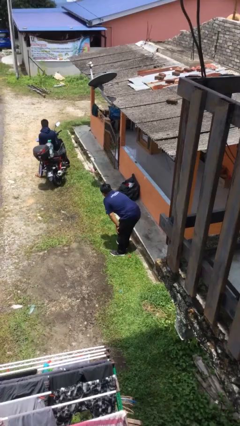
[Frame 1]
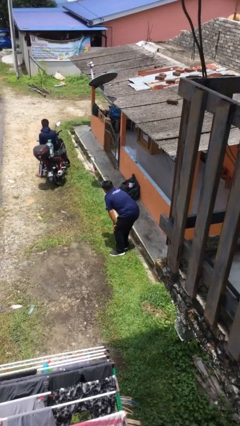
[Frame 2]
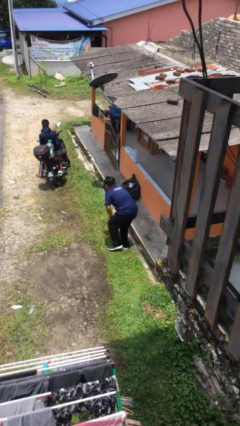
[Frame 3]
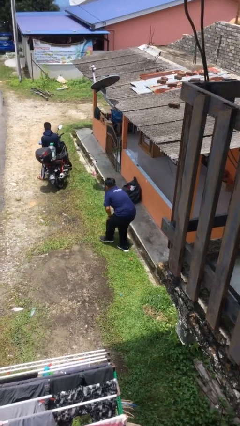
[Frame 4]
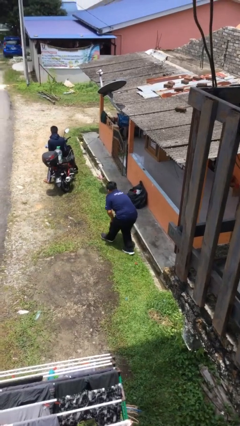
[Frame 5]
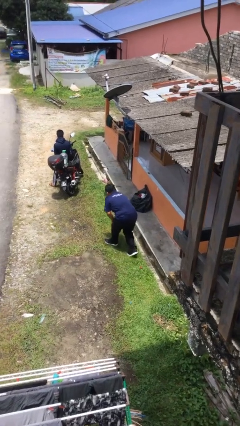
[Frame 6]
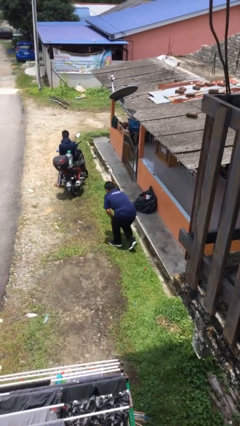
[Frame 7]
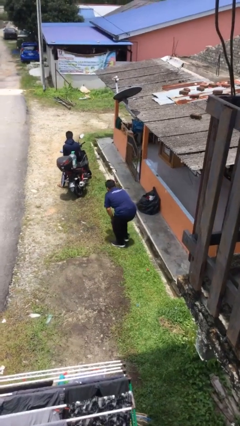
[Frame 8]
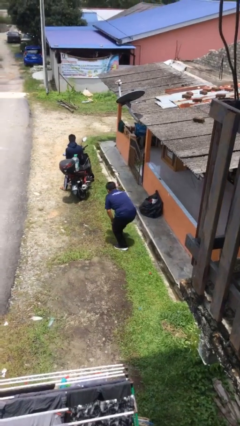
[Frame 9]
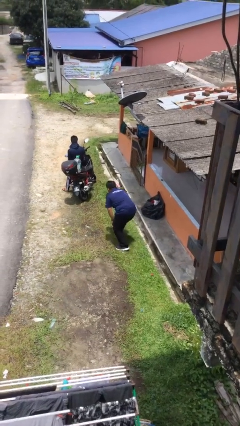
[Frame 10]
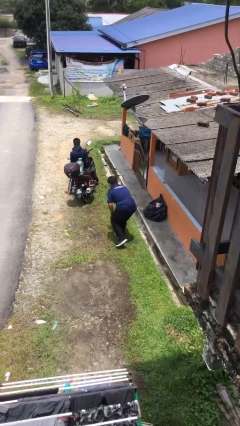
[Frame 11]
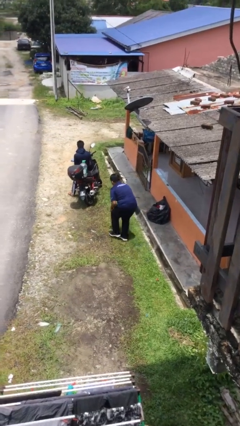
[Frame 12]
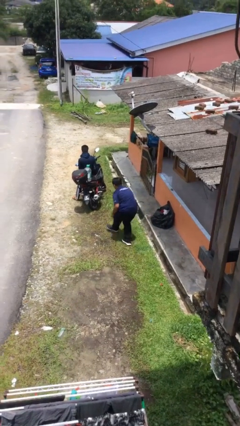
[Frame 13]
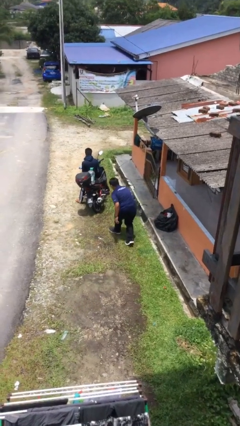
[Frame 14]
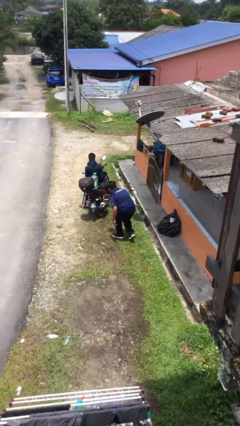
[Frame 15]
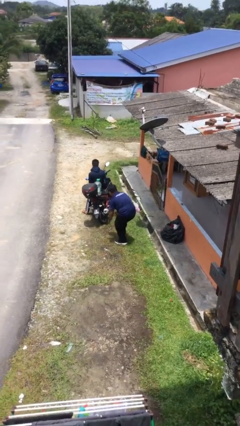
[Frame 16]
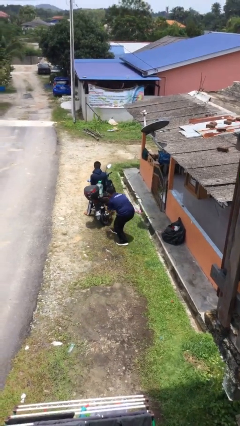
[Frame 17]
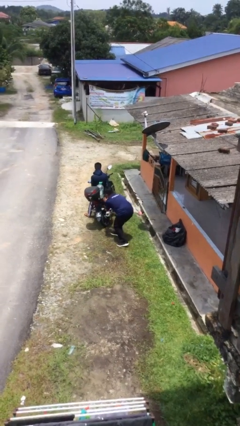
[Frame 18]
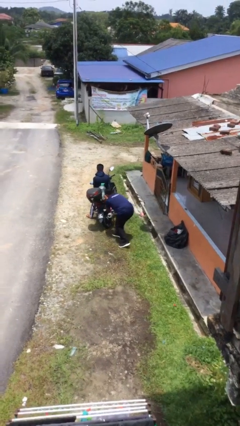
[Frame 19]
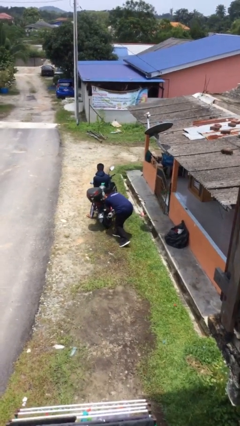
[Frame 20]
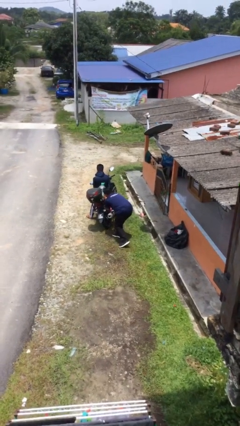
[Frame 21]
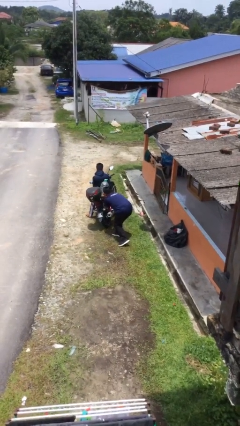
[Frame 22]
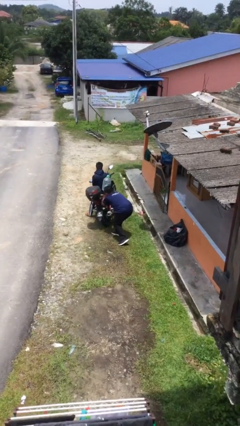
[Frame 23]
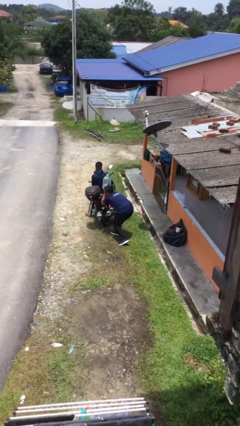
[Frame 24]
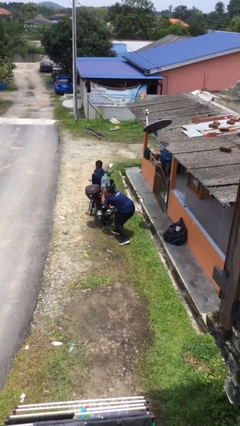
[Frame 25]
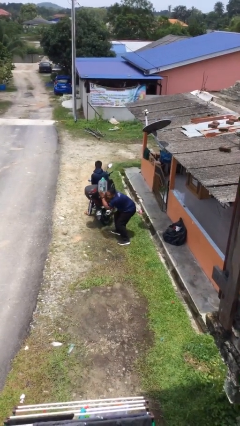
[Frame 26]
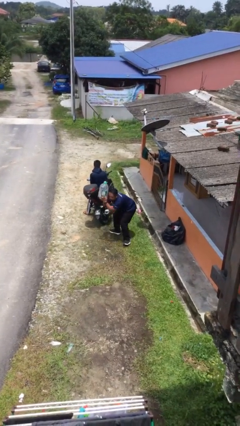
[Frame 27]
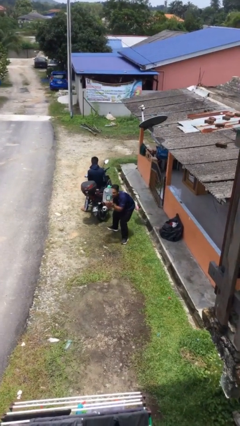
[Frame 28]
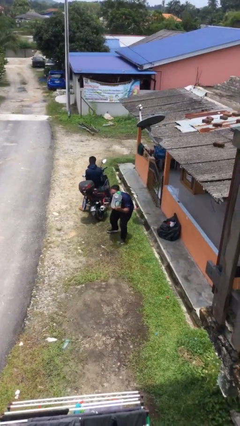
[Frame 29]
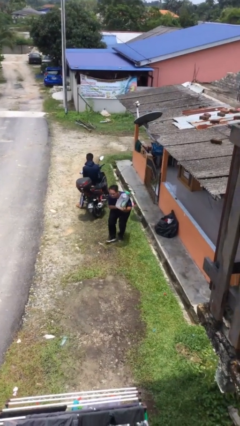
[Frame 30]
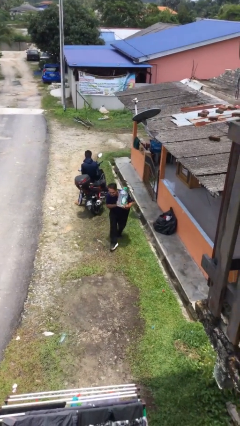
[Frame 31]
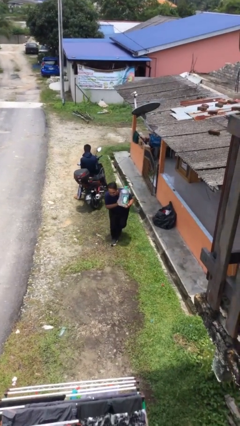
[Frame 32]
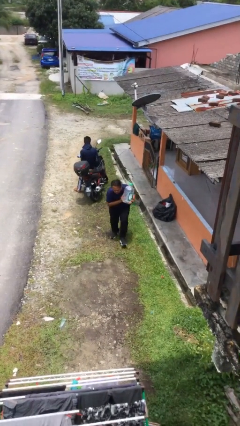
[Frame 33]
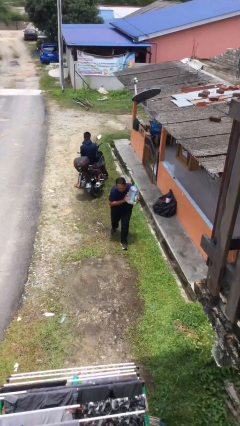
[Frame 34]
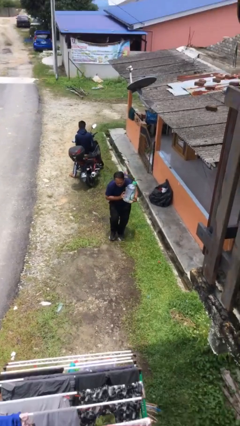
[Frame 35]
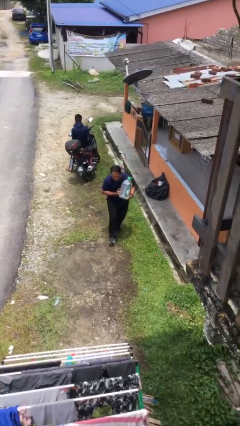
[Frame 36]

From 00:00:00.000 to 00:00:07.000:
person steals object from person

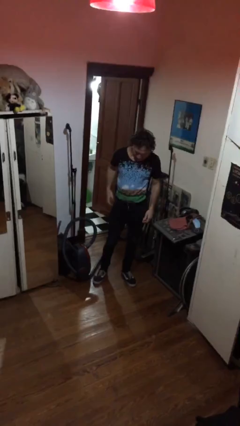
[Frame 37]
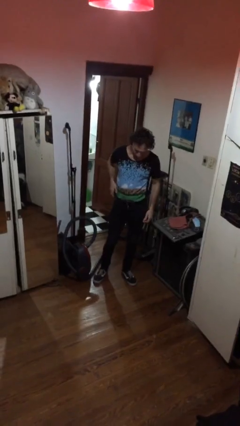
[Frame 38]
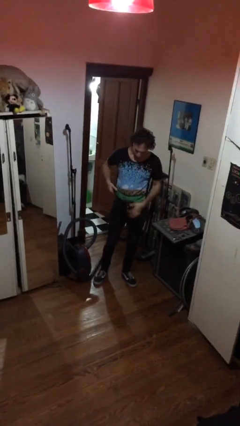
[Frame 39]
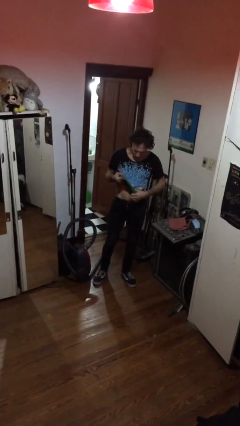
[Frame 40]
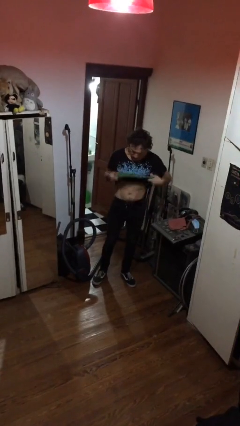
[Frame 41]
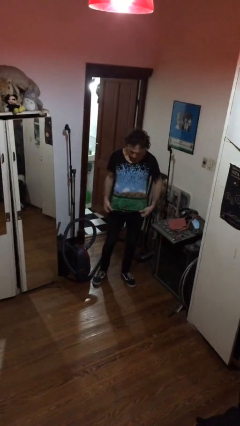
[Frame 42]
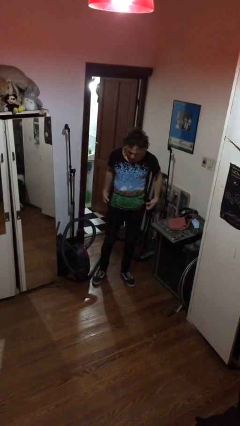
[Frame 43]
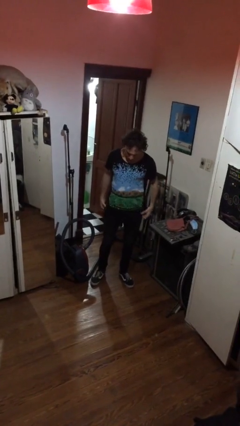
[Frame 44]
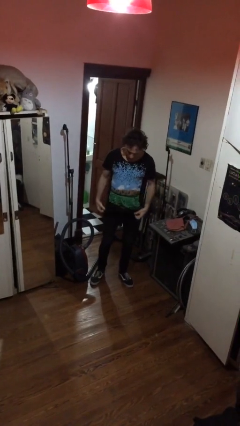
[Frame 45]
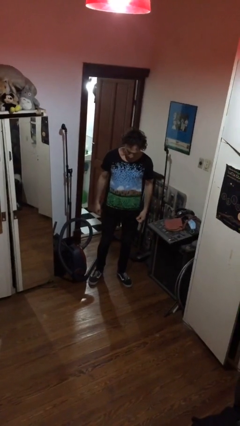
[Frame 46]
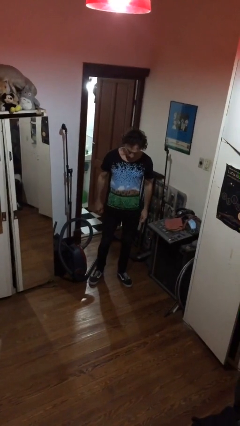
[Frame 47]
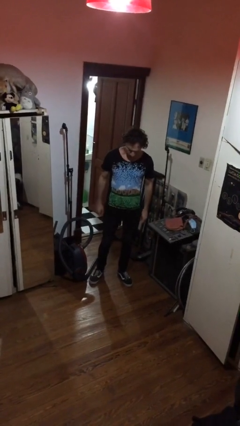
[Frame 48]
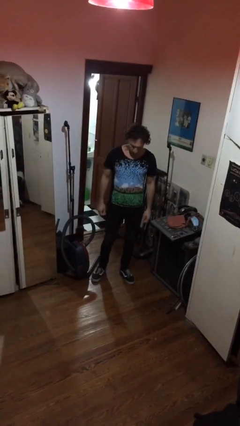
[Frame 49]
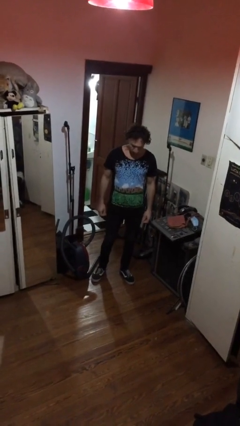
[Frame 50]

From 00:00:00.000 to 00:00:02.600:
person untucks shirt

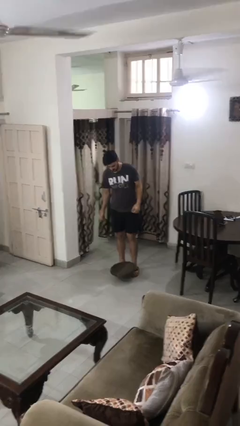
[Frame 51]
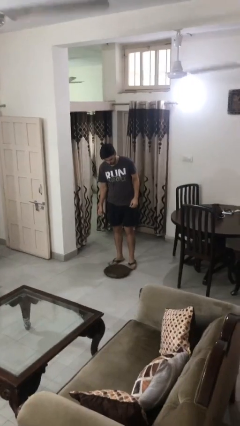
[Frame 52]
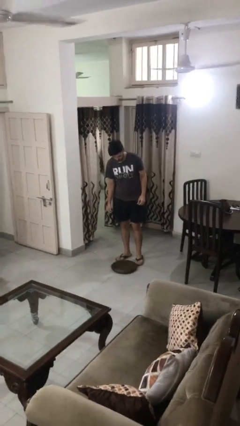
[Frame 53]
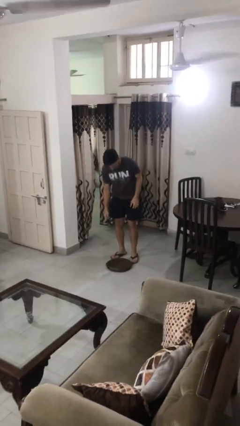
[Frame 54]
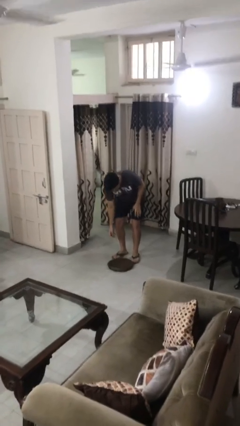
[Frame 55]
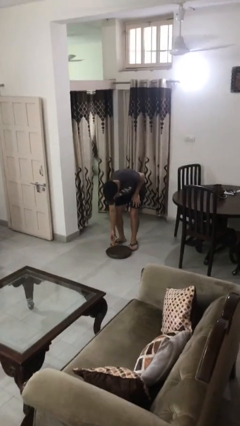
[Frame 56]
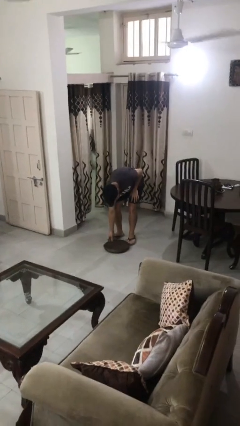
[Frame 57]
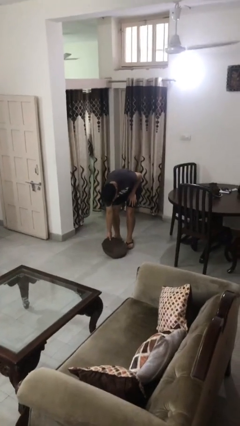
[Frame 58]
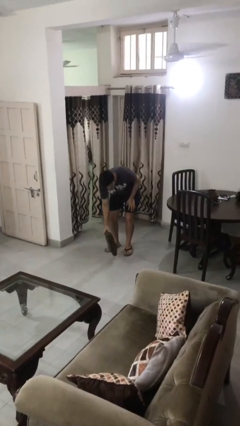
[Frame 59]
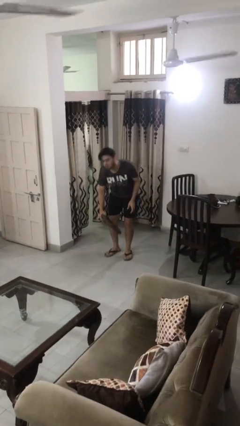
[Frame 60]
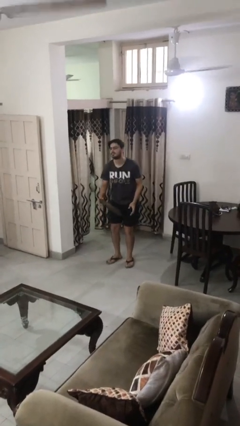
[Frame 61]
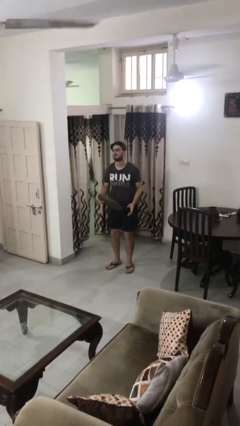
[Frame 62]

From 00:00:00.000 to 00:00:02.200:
person picks up object from floor

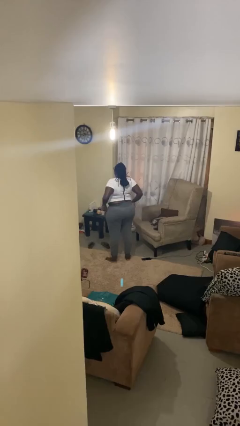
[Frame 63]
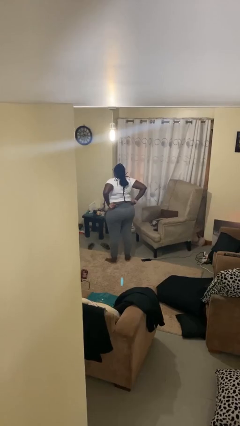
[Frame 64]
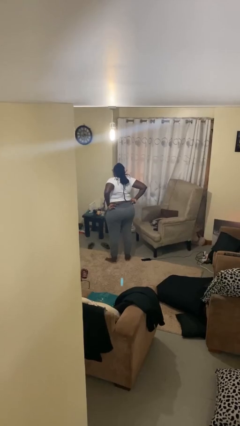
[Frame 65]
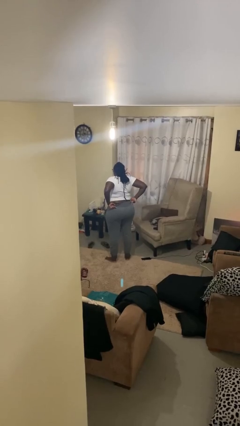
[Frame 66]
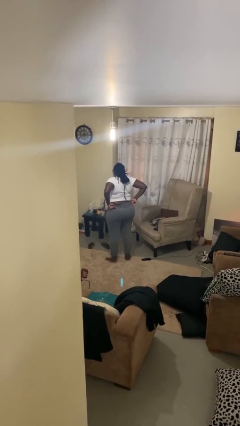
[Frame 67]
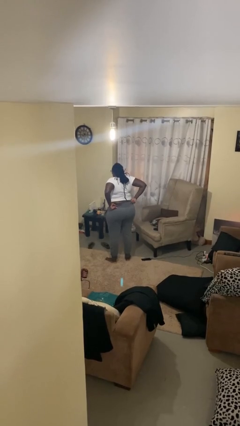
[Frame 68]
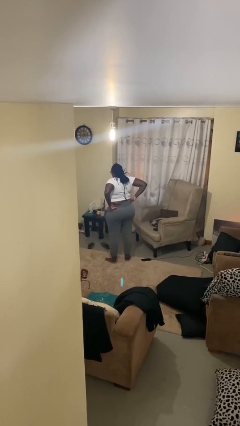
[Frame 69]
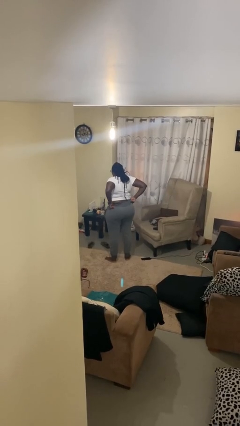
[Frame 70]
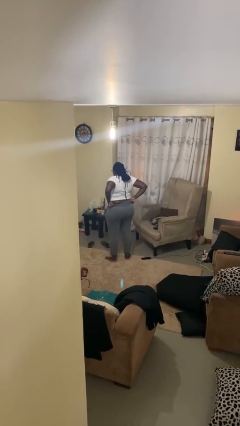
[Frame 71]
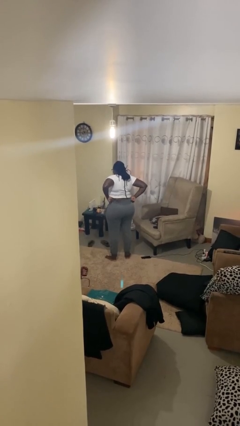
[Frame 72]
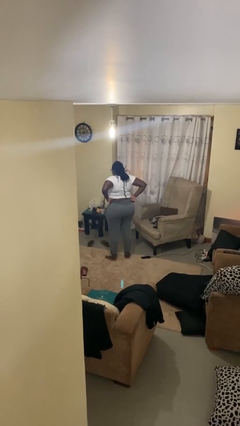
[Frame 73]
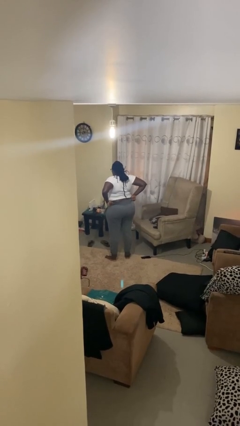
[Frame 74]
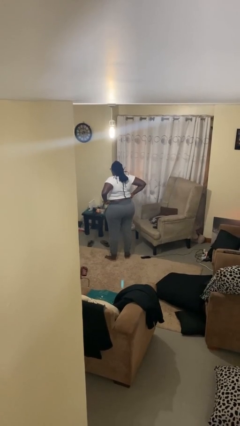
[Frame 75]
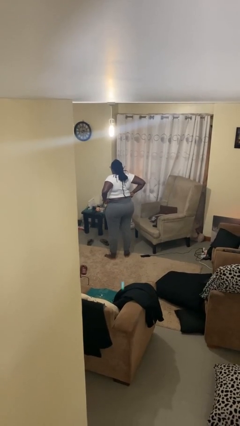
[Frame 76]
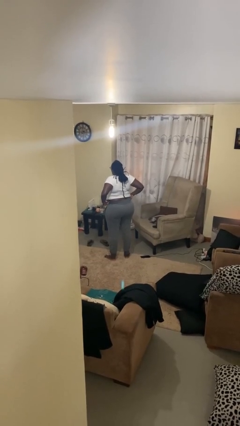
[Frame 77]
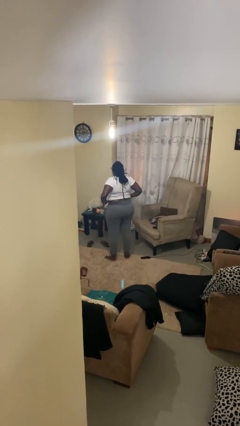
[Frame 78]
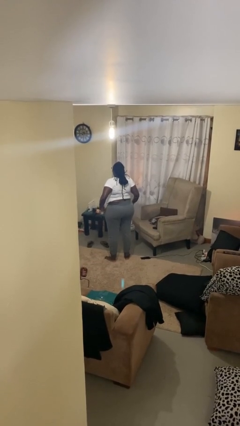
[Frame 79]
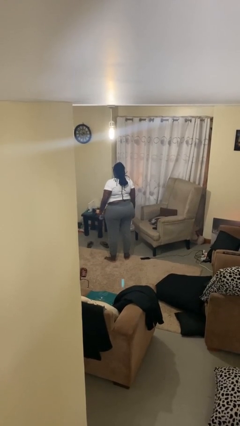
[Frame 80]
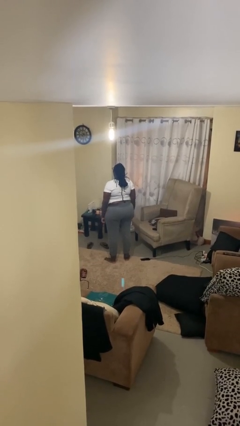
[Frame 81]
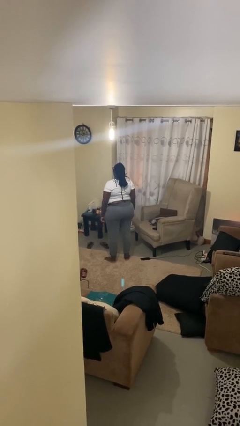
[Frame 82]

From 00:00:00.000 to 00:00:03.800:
person hikes up pants

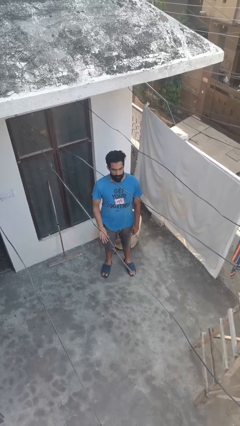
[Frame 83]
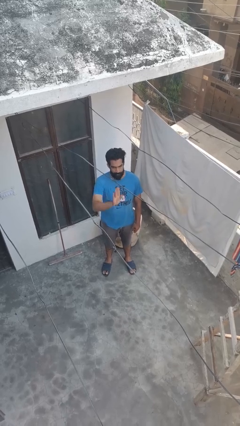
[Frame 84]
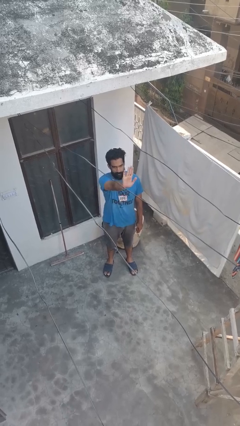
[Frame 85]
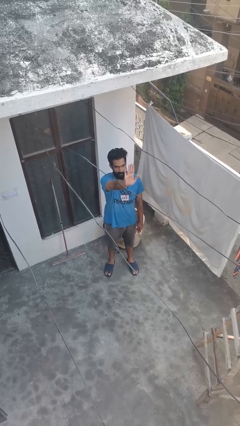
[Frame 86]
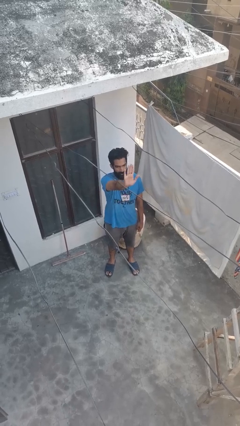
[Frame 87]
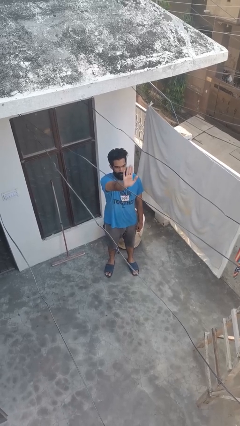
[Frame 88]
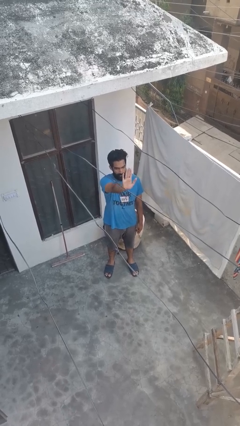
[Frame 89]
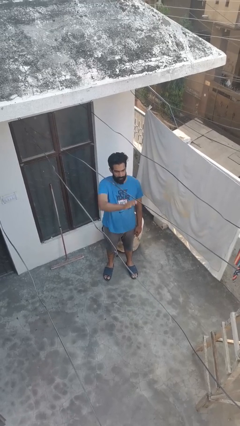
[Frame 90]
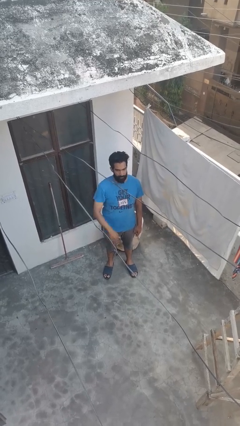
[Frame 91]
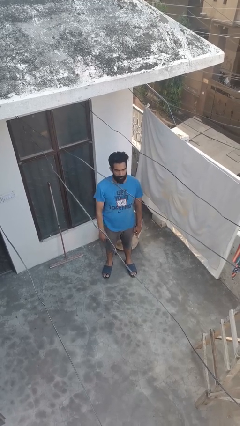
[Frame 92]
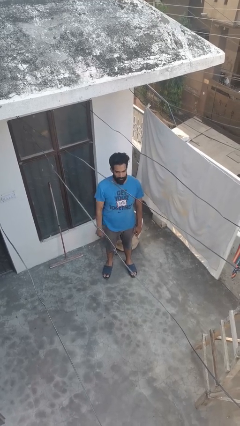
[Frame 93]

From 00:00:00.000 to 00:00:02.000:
person gestures stop
